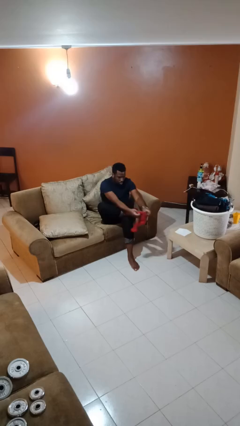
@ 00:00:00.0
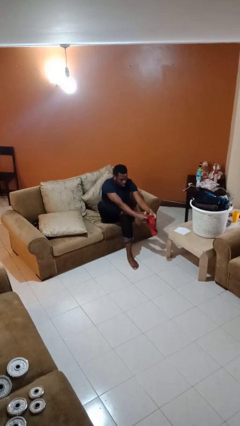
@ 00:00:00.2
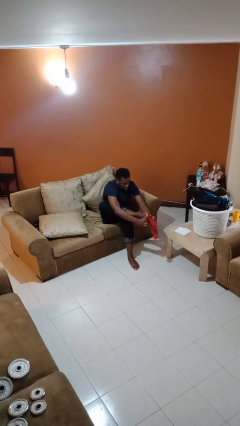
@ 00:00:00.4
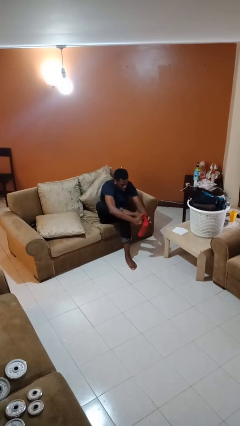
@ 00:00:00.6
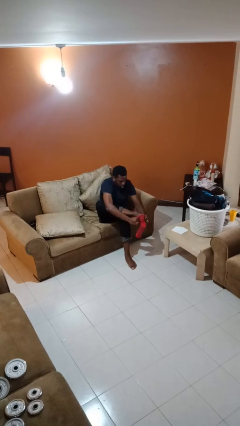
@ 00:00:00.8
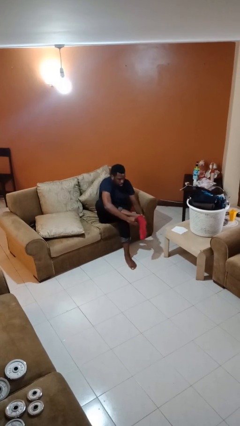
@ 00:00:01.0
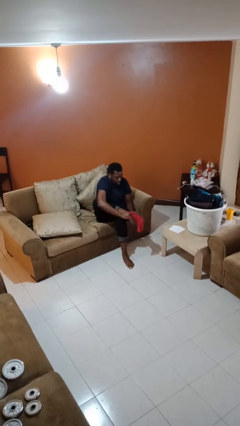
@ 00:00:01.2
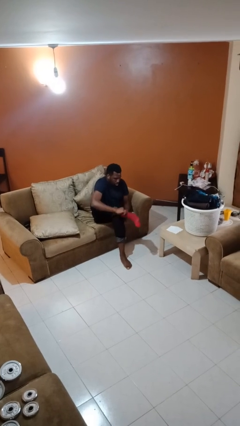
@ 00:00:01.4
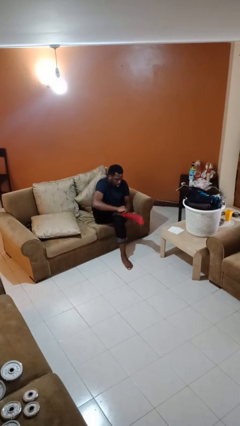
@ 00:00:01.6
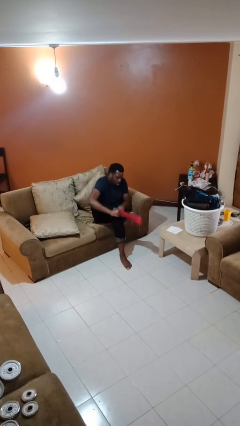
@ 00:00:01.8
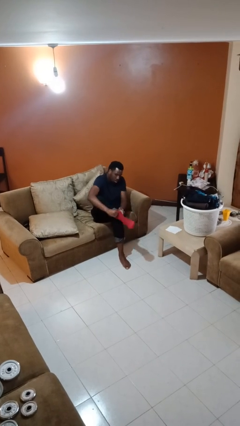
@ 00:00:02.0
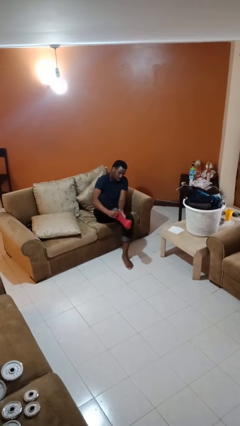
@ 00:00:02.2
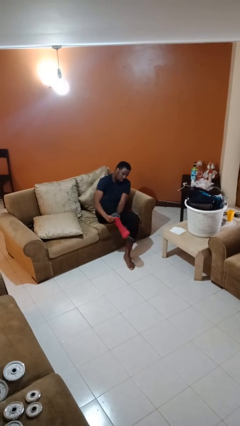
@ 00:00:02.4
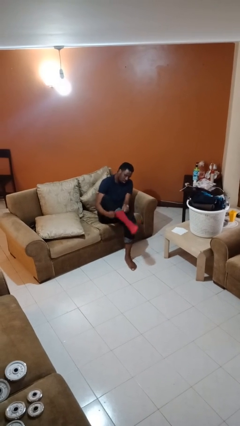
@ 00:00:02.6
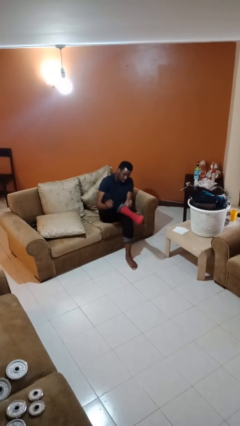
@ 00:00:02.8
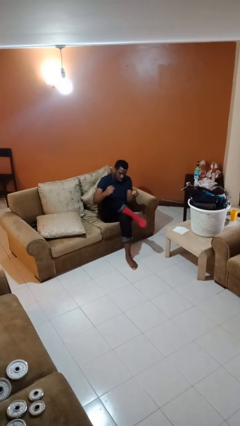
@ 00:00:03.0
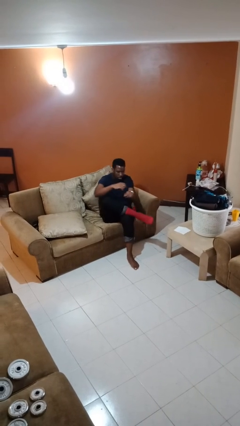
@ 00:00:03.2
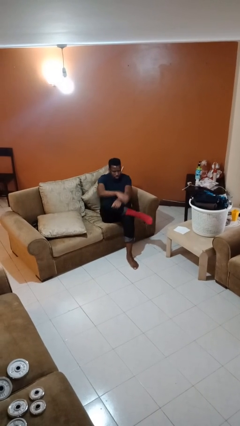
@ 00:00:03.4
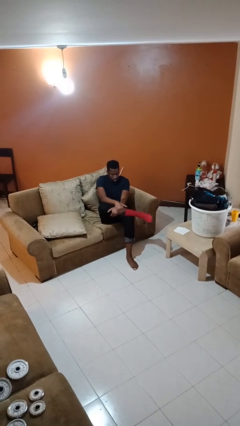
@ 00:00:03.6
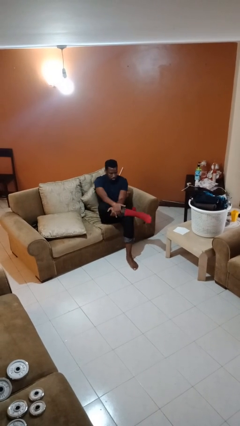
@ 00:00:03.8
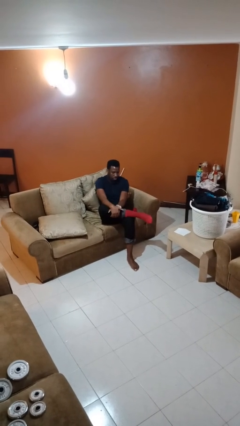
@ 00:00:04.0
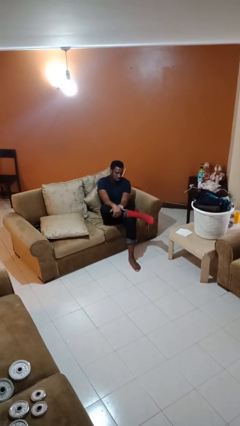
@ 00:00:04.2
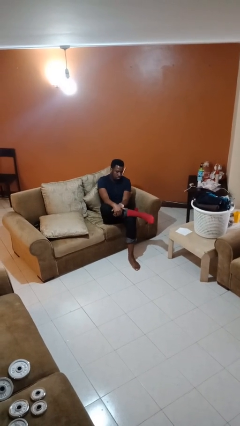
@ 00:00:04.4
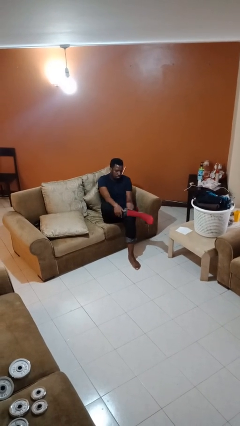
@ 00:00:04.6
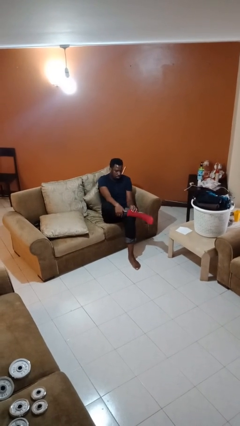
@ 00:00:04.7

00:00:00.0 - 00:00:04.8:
person puts on socks

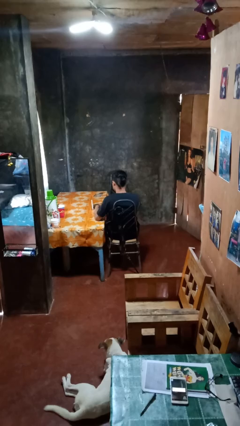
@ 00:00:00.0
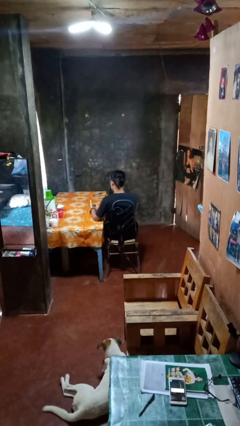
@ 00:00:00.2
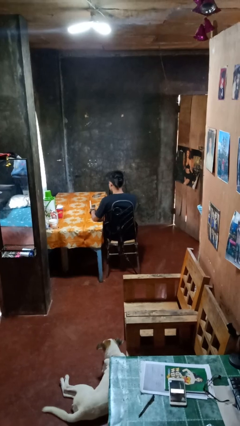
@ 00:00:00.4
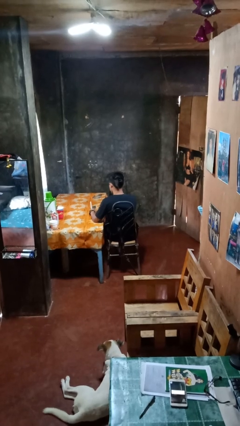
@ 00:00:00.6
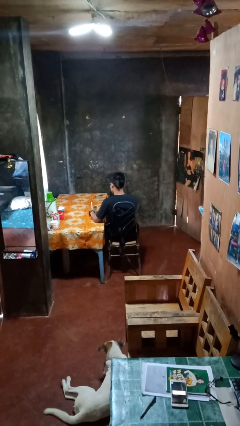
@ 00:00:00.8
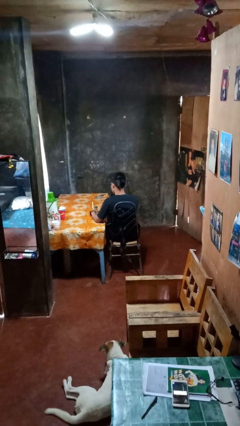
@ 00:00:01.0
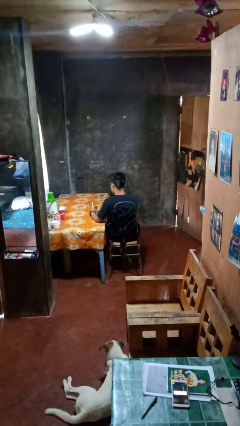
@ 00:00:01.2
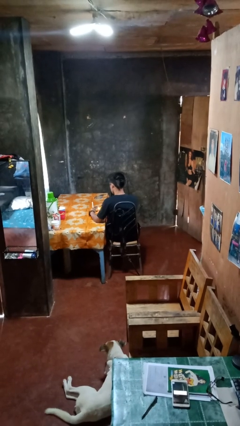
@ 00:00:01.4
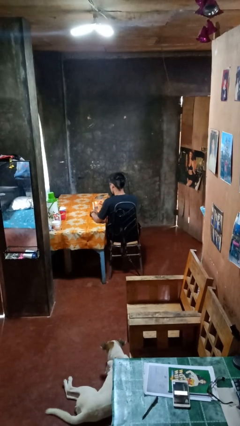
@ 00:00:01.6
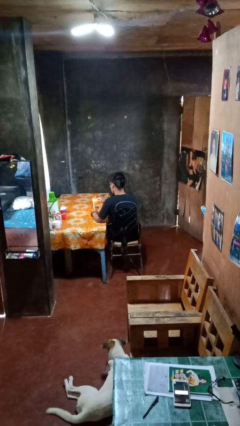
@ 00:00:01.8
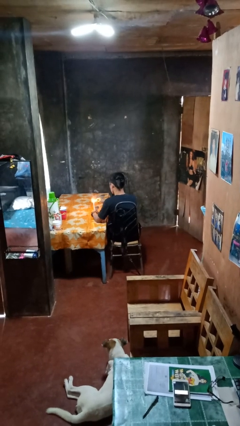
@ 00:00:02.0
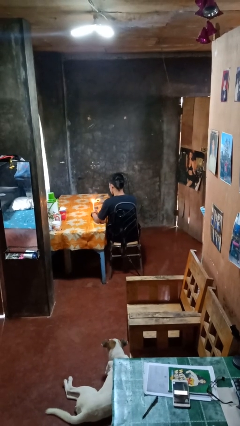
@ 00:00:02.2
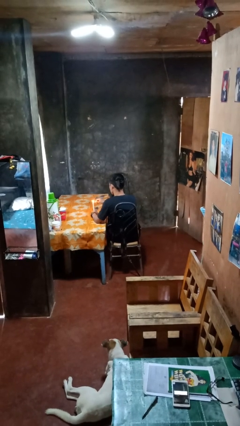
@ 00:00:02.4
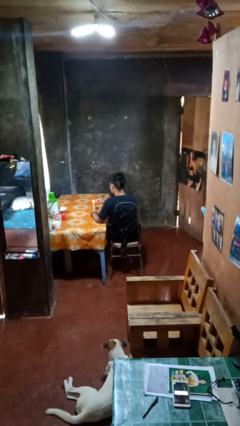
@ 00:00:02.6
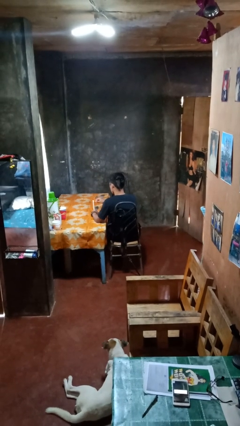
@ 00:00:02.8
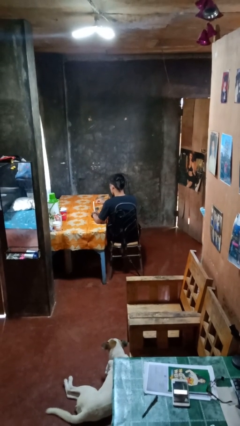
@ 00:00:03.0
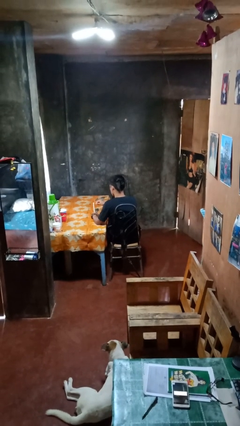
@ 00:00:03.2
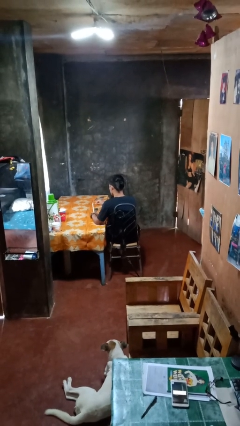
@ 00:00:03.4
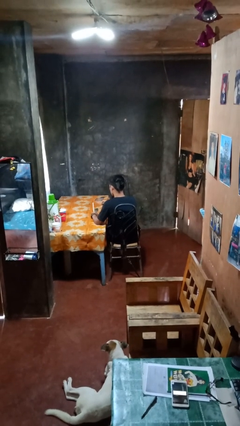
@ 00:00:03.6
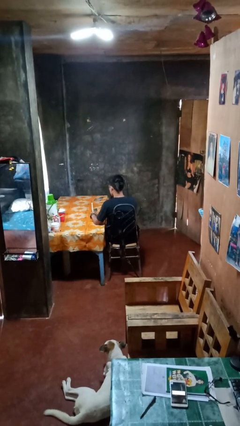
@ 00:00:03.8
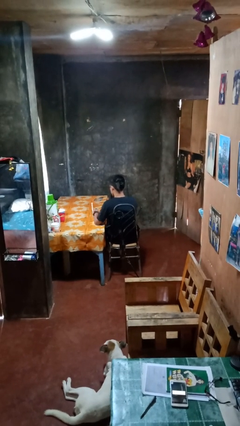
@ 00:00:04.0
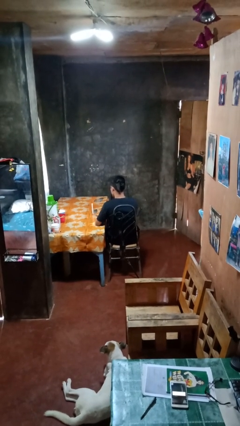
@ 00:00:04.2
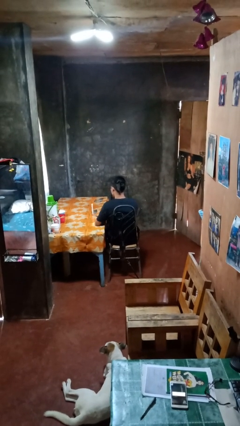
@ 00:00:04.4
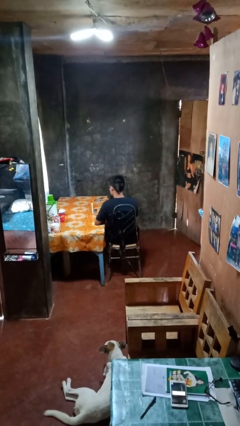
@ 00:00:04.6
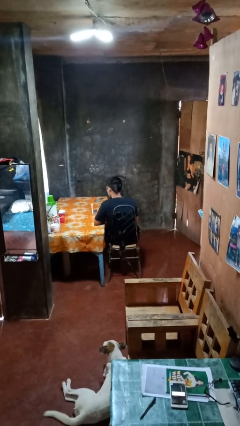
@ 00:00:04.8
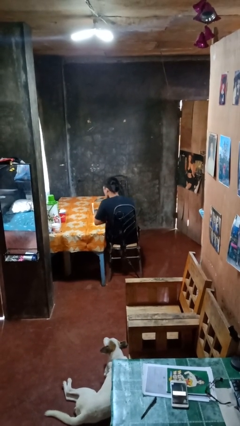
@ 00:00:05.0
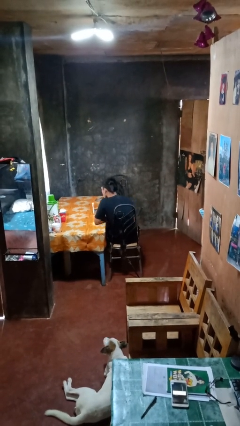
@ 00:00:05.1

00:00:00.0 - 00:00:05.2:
person lights candle

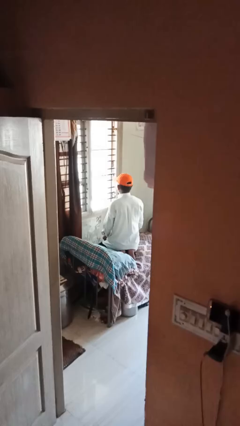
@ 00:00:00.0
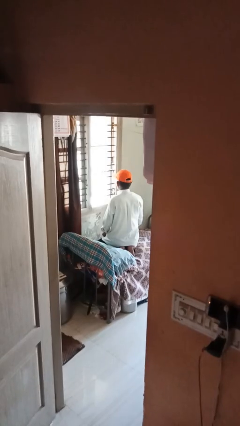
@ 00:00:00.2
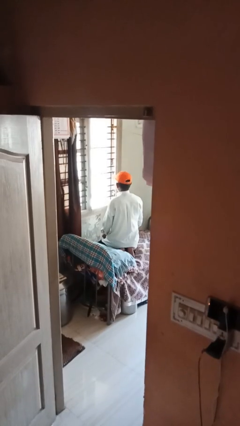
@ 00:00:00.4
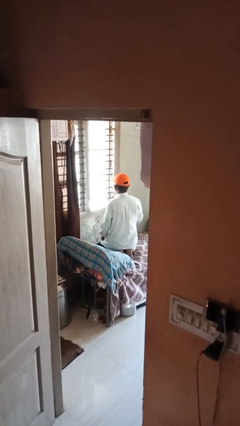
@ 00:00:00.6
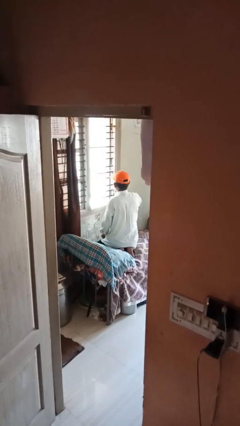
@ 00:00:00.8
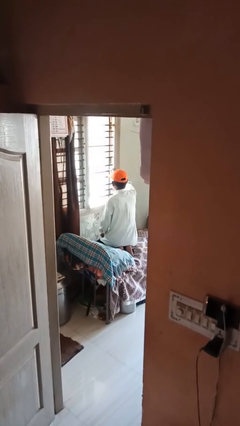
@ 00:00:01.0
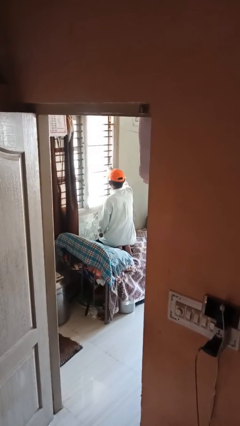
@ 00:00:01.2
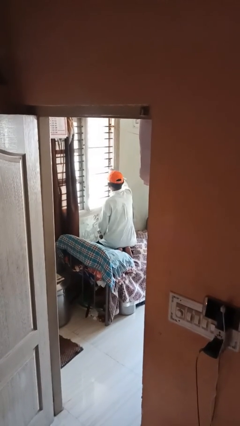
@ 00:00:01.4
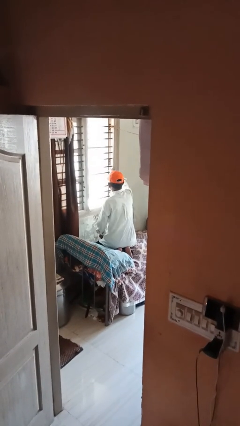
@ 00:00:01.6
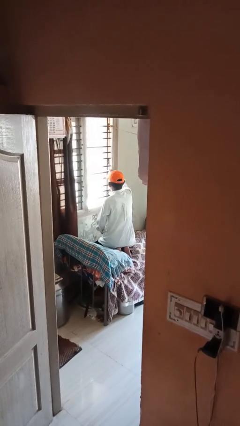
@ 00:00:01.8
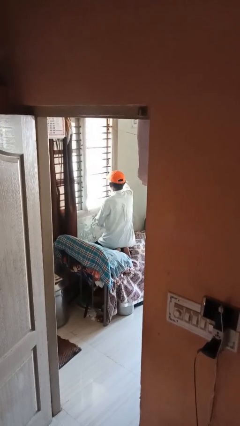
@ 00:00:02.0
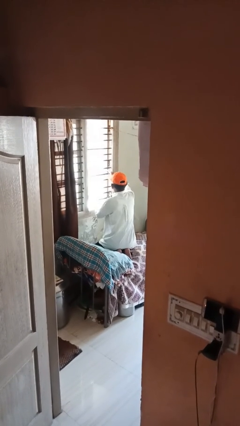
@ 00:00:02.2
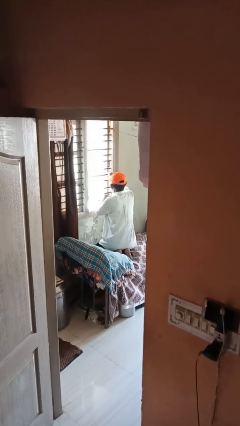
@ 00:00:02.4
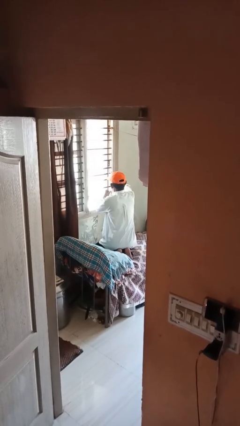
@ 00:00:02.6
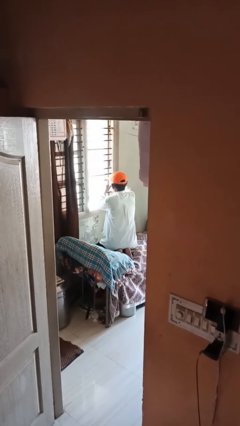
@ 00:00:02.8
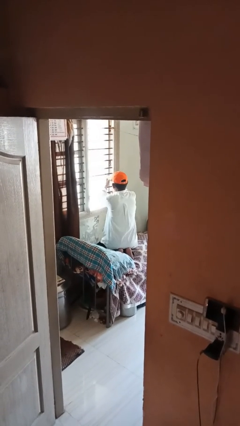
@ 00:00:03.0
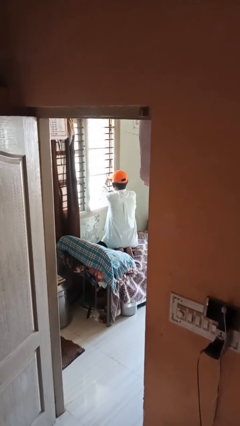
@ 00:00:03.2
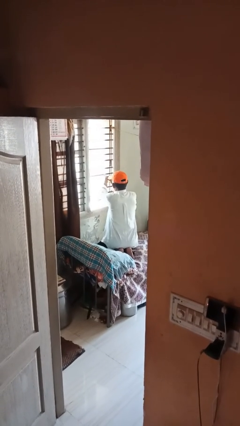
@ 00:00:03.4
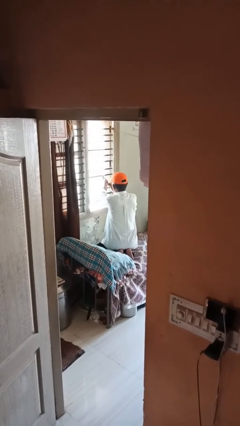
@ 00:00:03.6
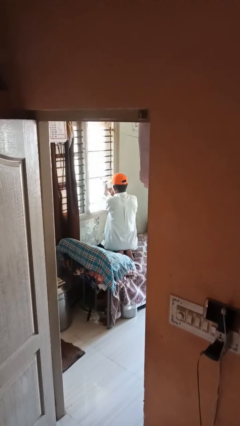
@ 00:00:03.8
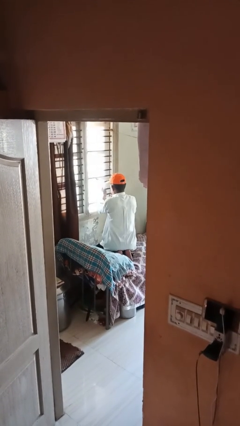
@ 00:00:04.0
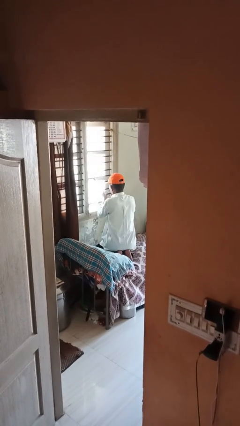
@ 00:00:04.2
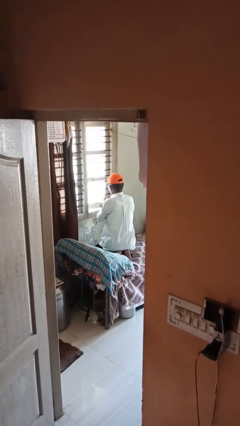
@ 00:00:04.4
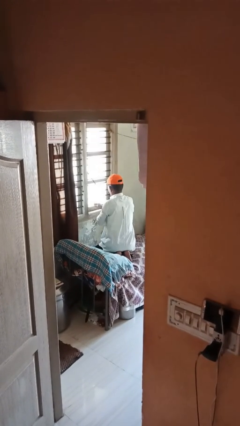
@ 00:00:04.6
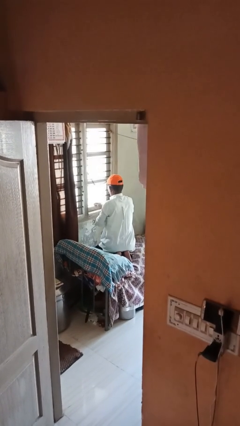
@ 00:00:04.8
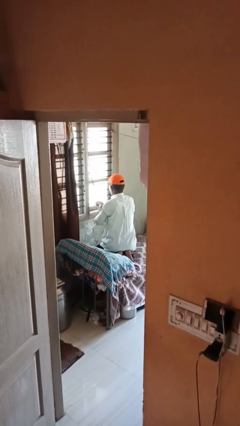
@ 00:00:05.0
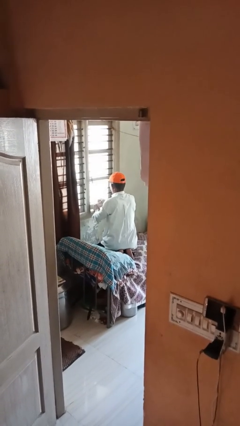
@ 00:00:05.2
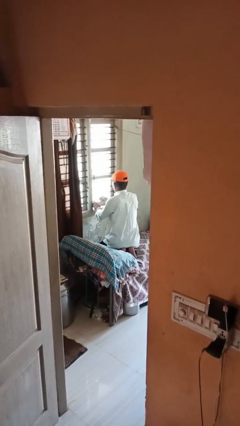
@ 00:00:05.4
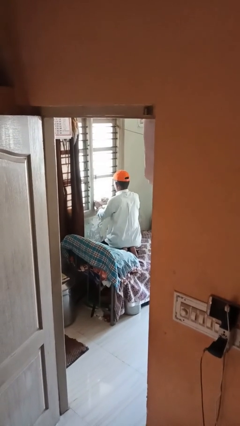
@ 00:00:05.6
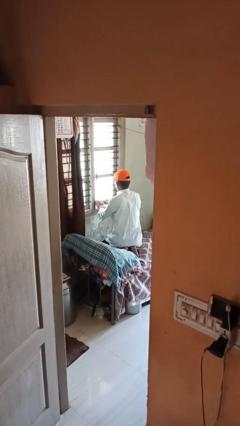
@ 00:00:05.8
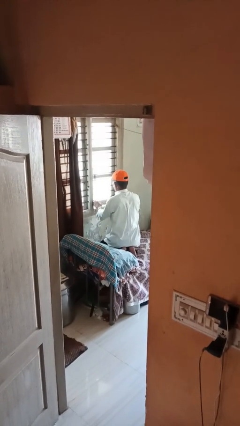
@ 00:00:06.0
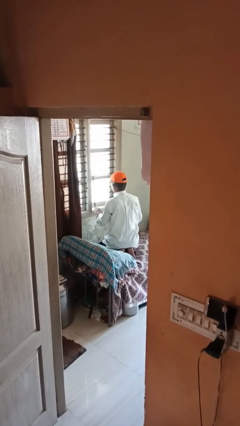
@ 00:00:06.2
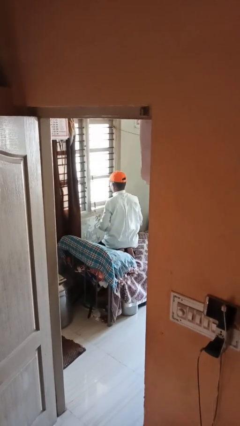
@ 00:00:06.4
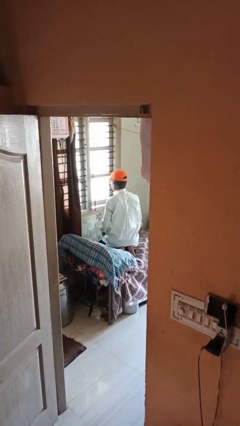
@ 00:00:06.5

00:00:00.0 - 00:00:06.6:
person closes home window

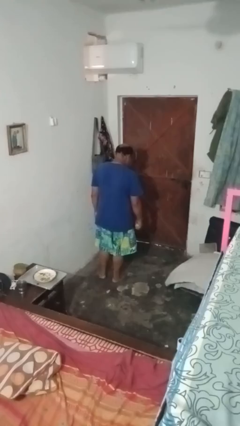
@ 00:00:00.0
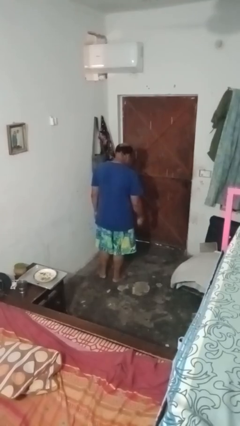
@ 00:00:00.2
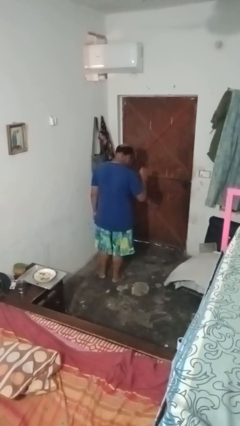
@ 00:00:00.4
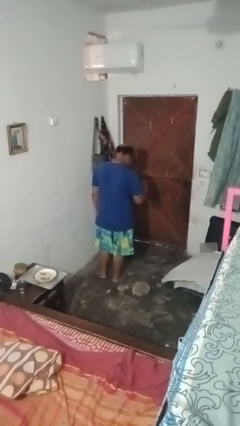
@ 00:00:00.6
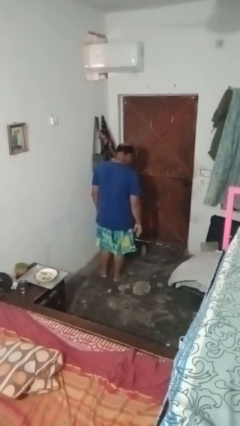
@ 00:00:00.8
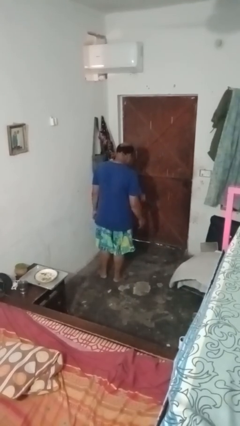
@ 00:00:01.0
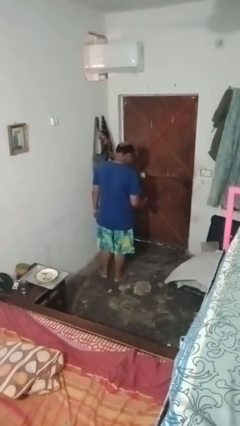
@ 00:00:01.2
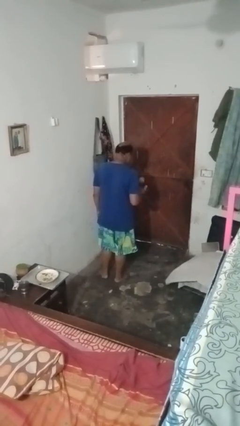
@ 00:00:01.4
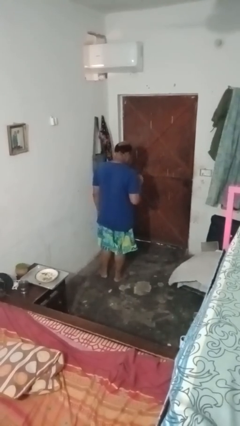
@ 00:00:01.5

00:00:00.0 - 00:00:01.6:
person bounces ball on floor
